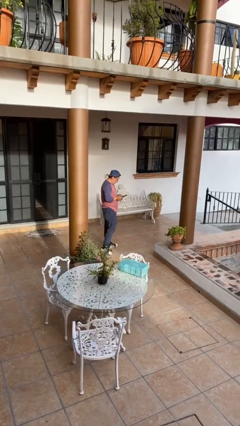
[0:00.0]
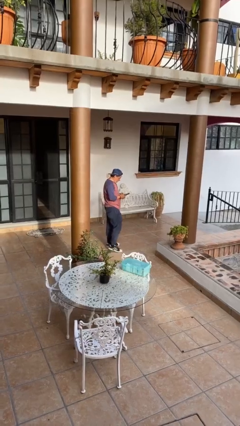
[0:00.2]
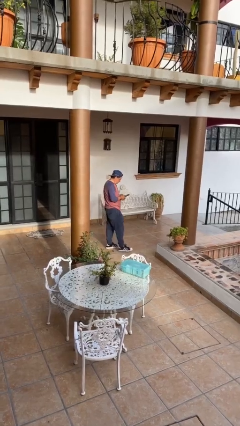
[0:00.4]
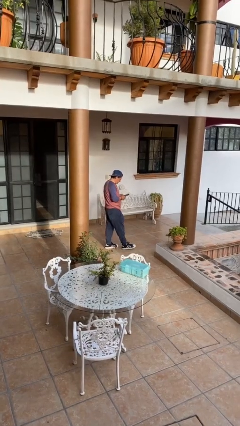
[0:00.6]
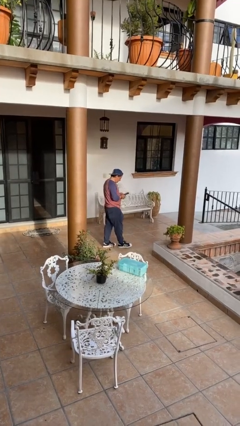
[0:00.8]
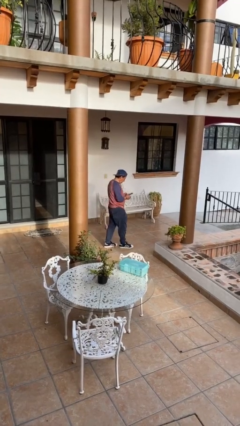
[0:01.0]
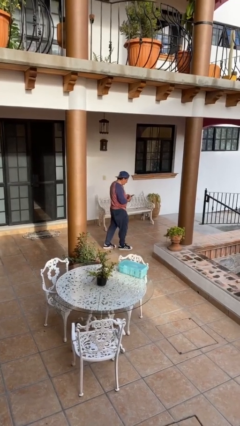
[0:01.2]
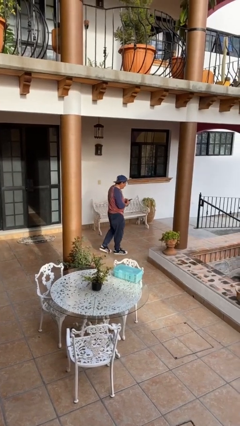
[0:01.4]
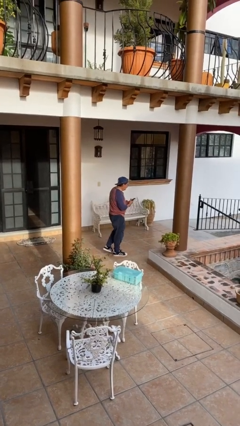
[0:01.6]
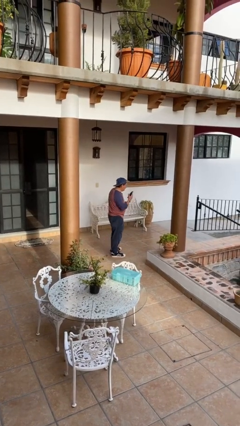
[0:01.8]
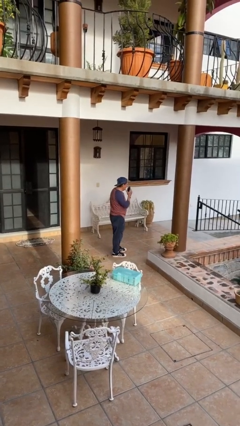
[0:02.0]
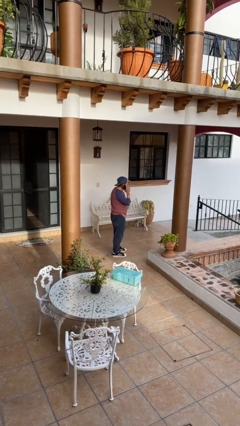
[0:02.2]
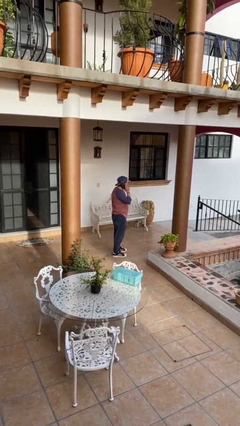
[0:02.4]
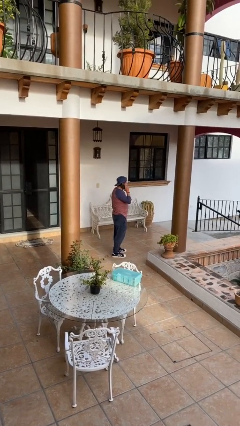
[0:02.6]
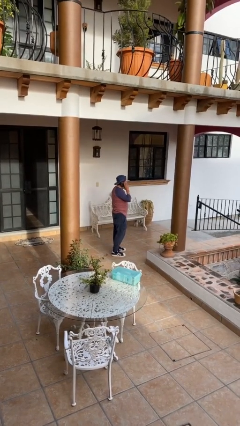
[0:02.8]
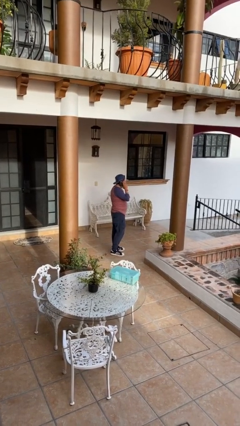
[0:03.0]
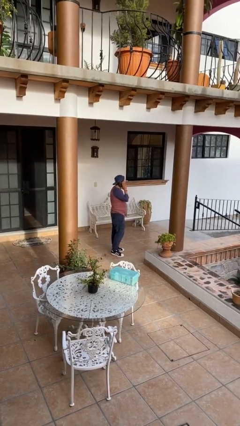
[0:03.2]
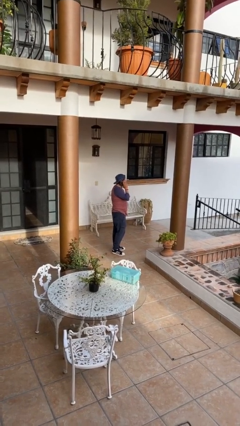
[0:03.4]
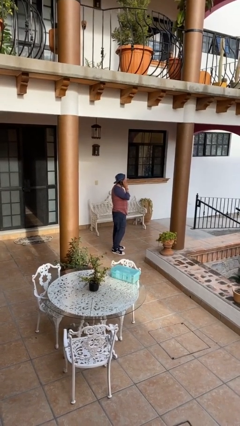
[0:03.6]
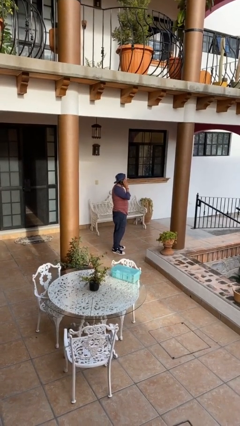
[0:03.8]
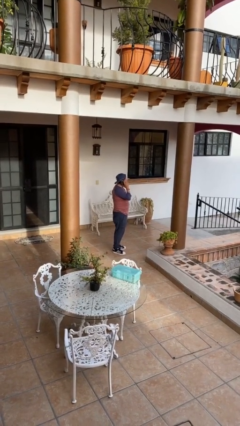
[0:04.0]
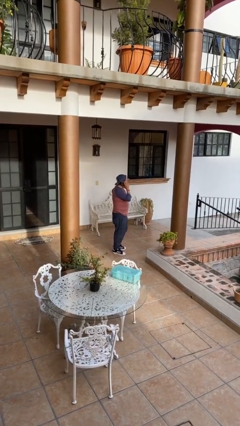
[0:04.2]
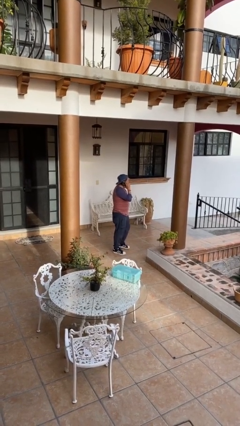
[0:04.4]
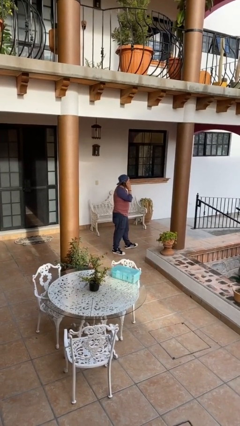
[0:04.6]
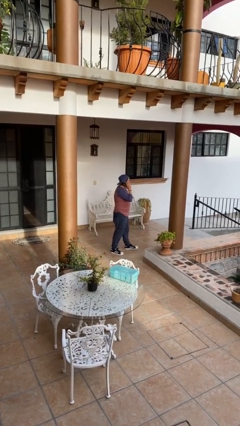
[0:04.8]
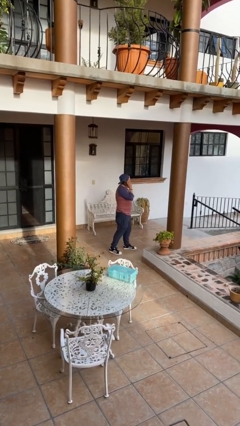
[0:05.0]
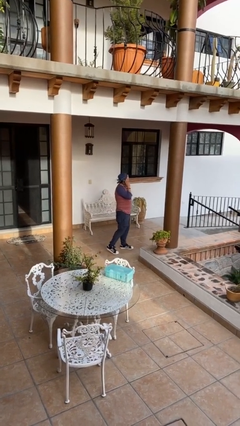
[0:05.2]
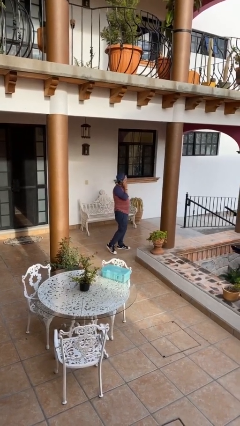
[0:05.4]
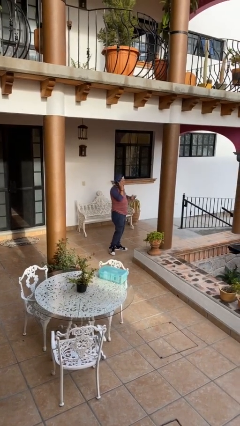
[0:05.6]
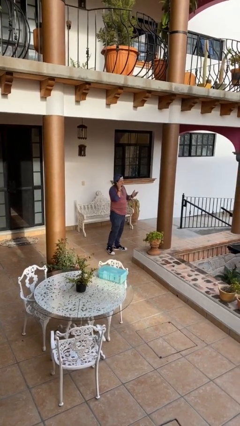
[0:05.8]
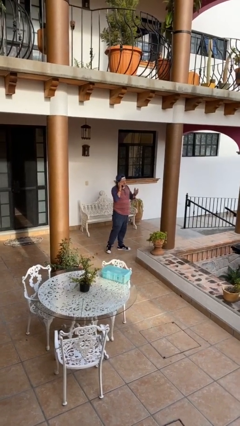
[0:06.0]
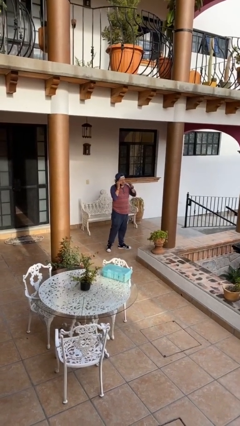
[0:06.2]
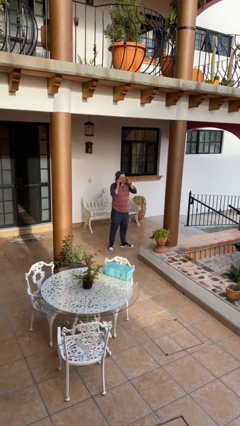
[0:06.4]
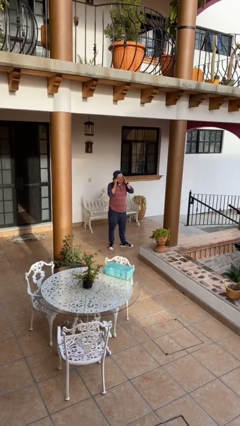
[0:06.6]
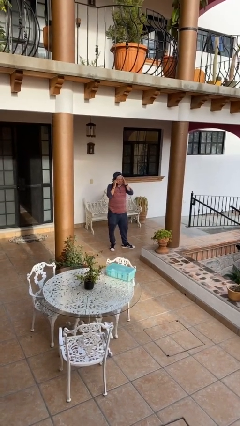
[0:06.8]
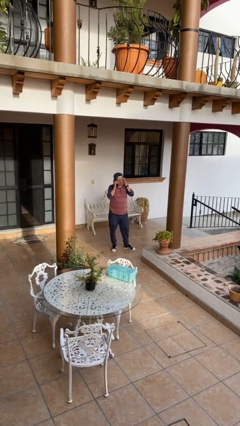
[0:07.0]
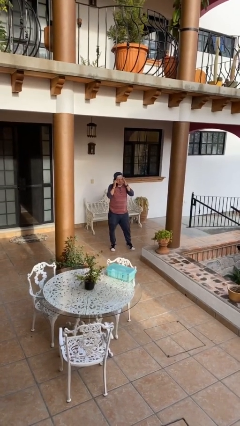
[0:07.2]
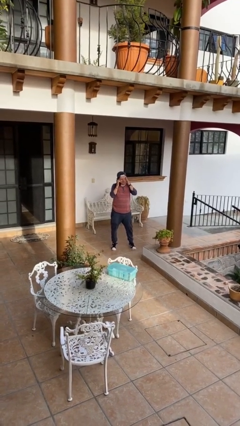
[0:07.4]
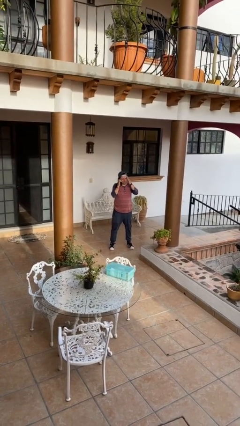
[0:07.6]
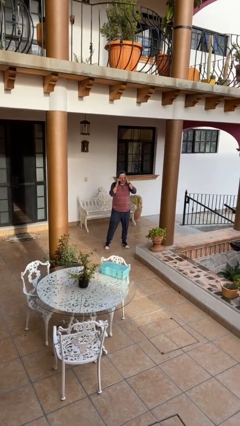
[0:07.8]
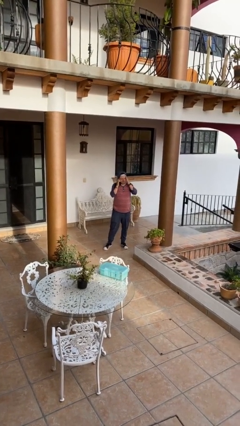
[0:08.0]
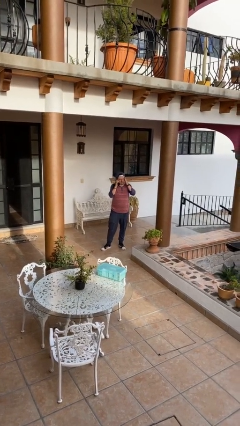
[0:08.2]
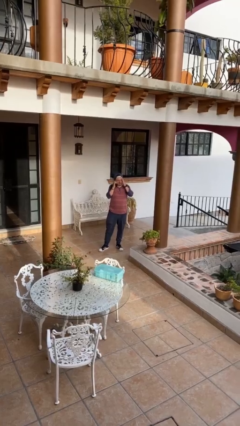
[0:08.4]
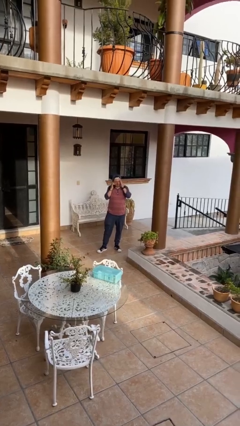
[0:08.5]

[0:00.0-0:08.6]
person talks on phone

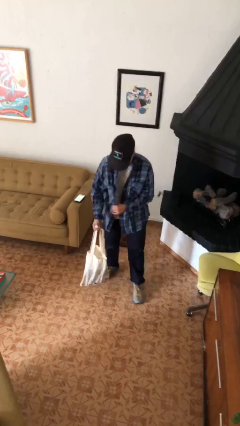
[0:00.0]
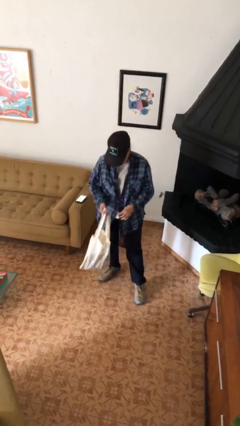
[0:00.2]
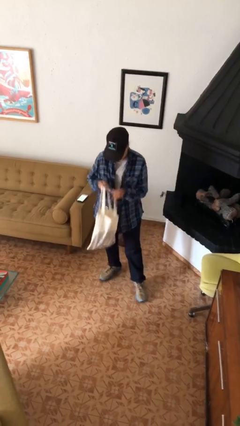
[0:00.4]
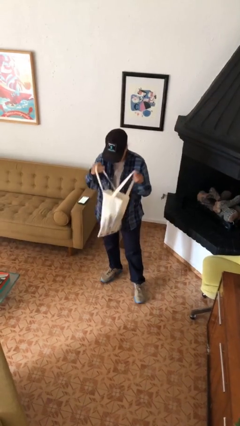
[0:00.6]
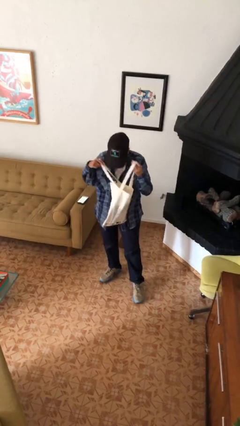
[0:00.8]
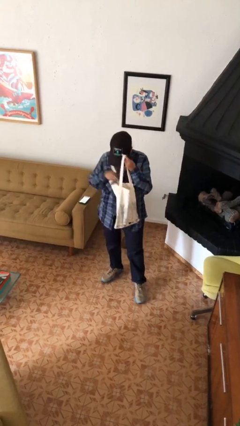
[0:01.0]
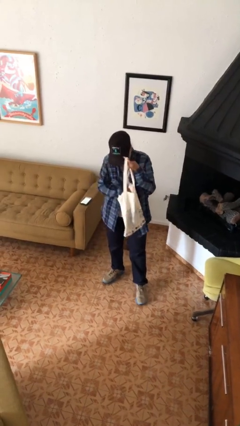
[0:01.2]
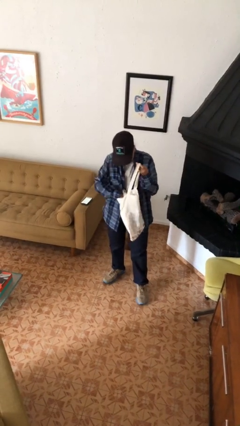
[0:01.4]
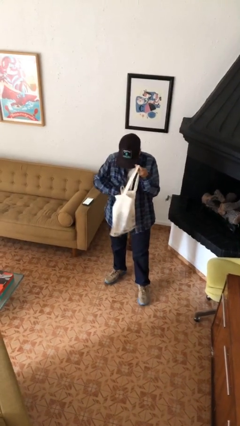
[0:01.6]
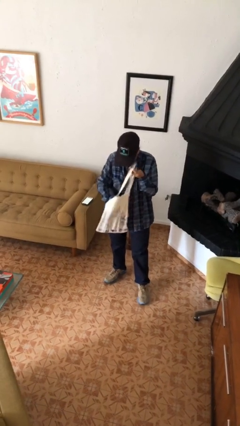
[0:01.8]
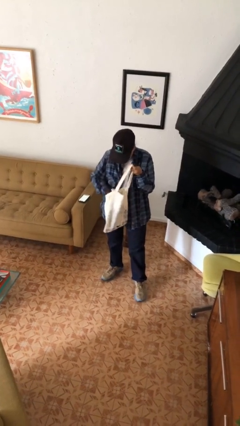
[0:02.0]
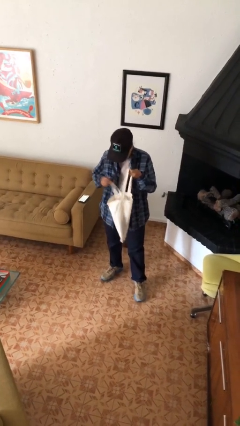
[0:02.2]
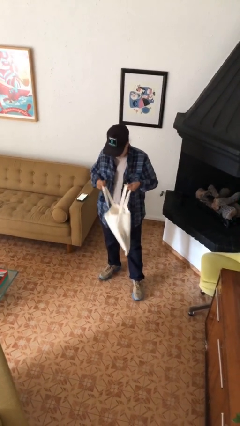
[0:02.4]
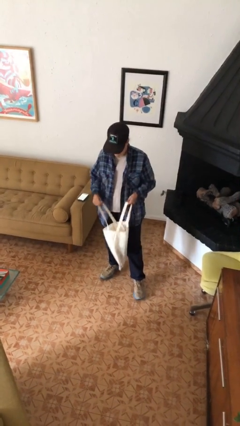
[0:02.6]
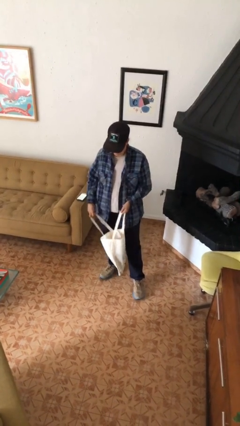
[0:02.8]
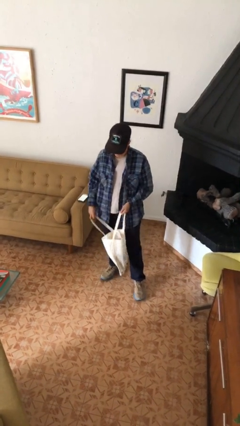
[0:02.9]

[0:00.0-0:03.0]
person searches in bag

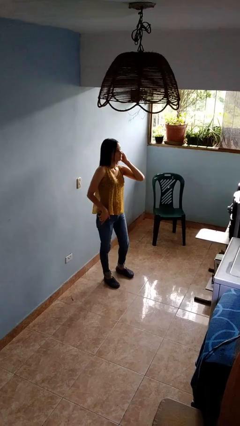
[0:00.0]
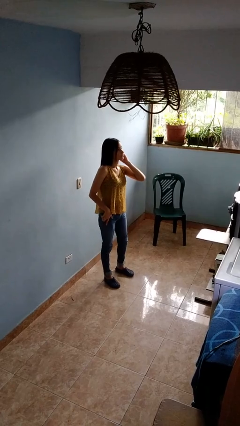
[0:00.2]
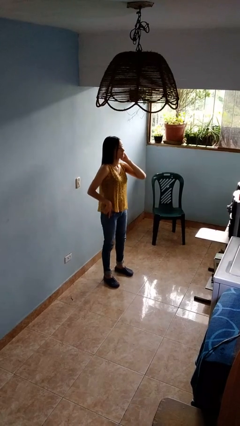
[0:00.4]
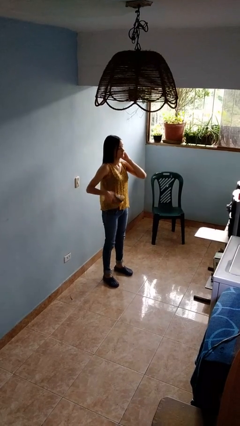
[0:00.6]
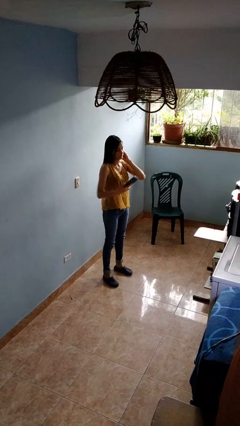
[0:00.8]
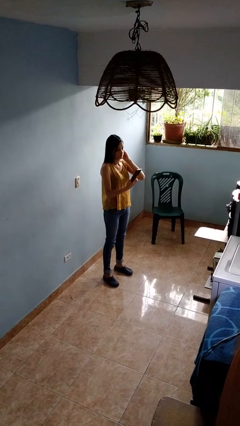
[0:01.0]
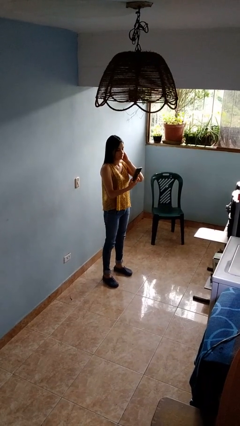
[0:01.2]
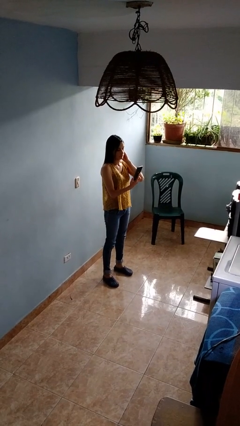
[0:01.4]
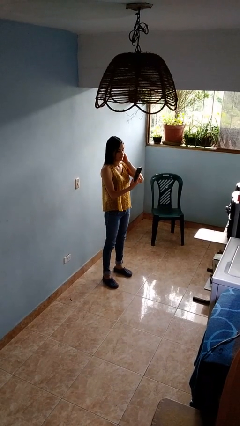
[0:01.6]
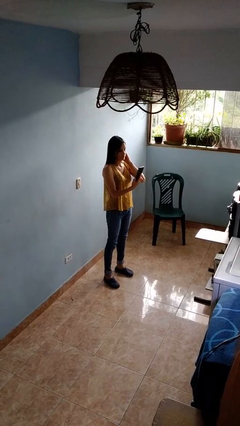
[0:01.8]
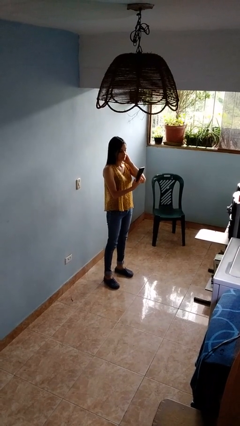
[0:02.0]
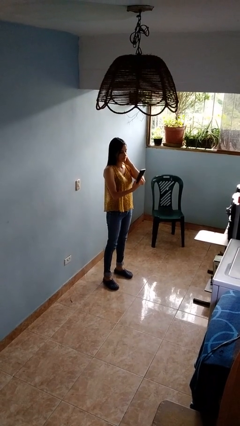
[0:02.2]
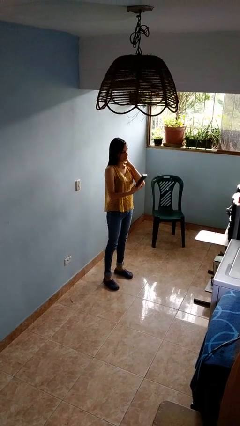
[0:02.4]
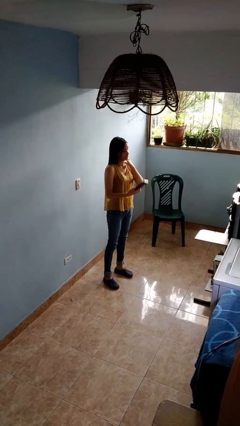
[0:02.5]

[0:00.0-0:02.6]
person takes phone from pocket

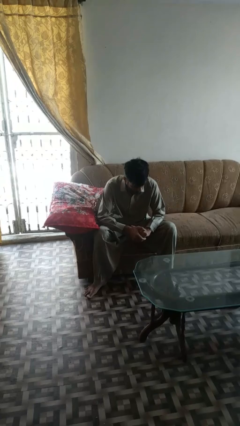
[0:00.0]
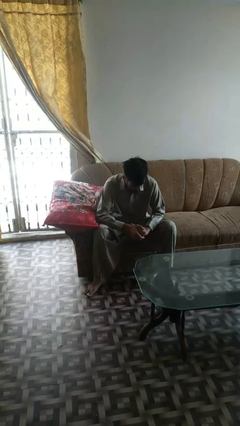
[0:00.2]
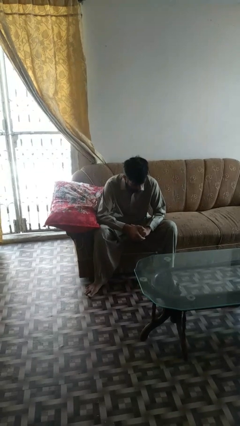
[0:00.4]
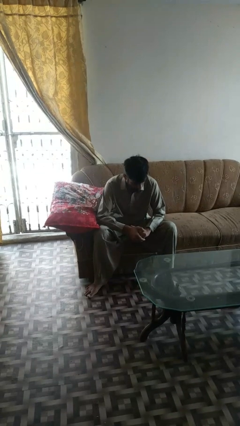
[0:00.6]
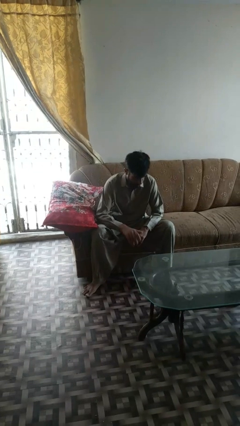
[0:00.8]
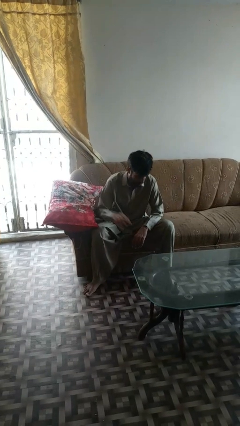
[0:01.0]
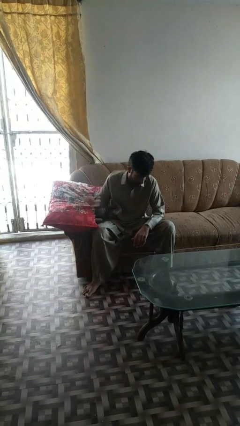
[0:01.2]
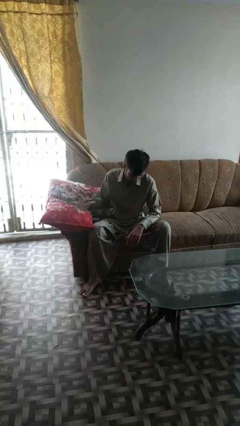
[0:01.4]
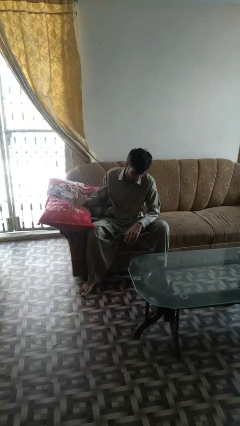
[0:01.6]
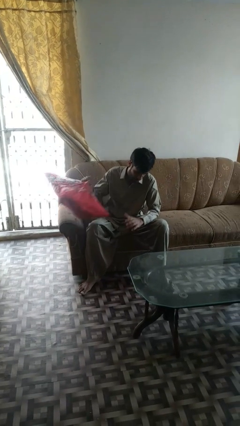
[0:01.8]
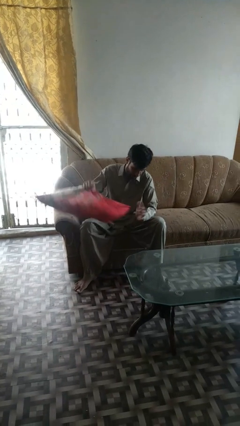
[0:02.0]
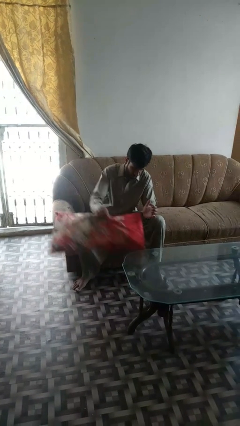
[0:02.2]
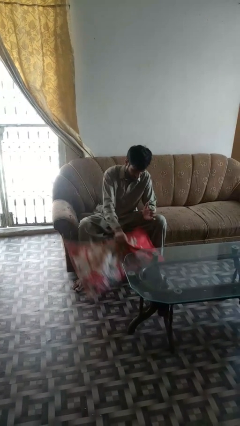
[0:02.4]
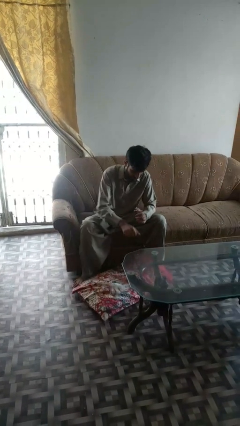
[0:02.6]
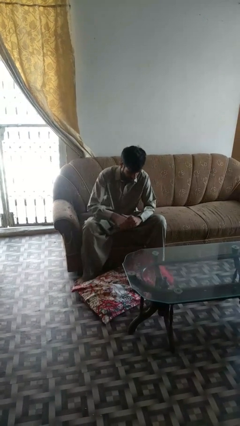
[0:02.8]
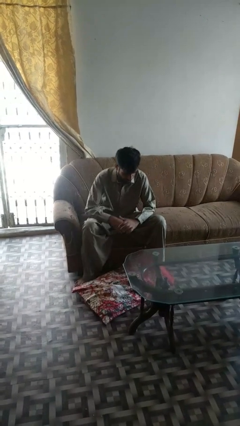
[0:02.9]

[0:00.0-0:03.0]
person drops object

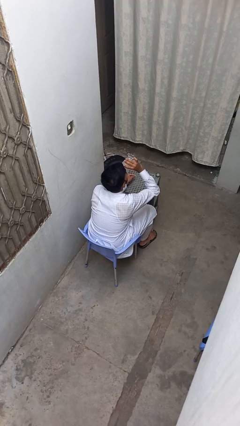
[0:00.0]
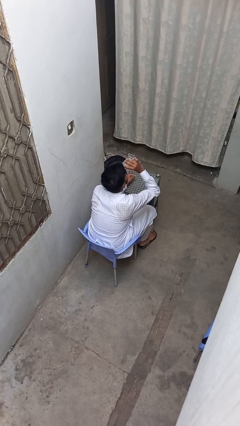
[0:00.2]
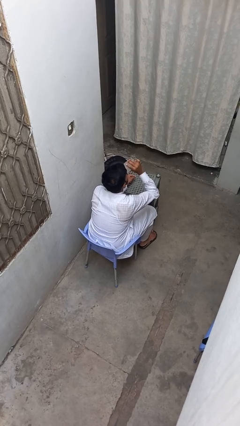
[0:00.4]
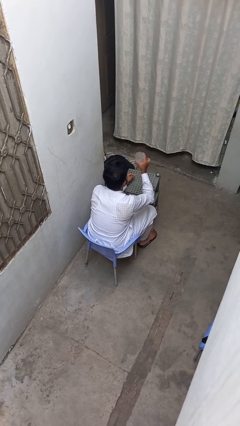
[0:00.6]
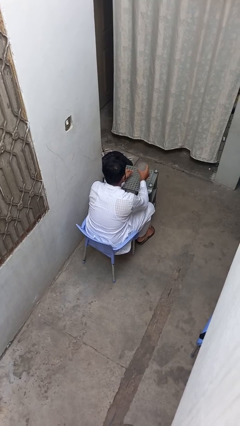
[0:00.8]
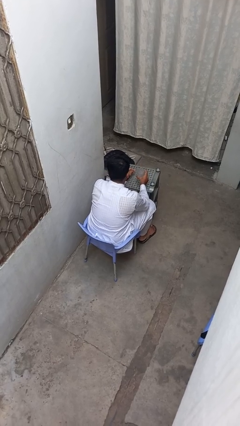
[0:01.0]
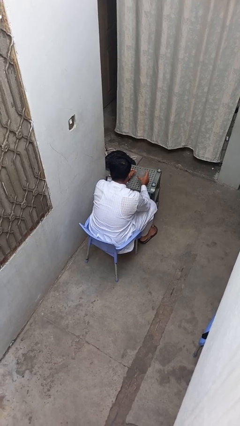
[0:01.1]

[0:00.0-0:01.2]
person puts down object on table
